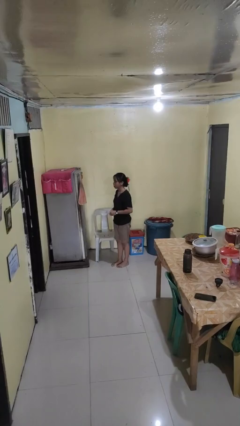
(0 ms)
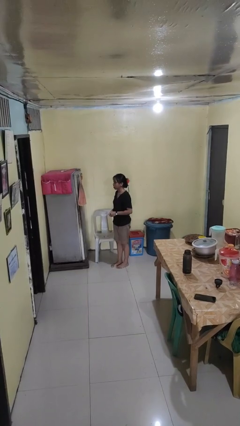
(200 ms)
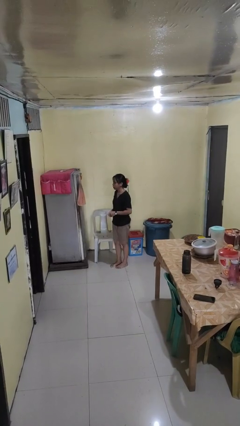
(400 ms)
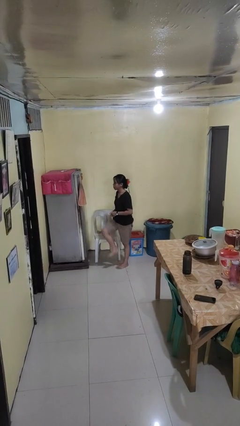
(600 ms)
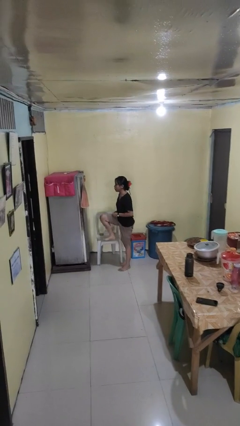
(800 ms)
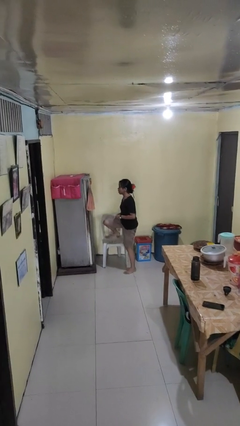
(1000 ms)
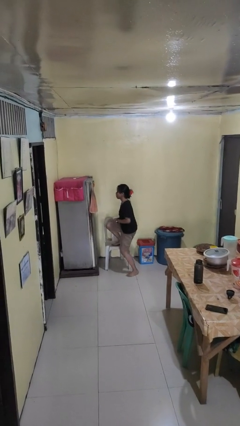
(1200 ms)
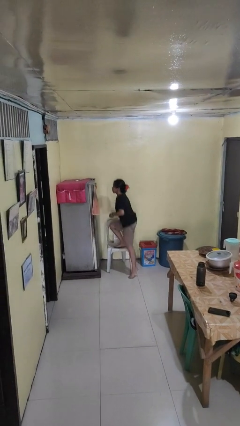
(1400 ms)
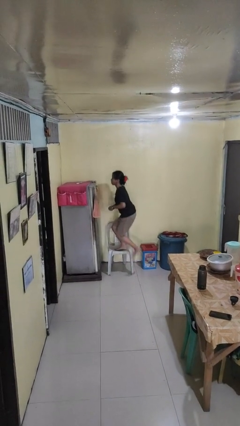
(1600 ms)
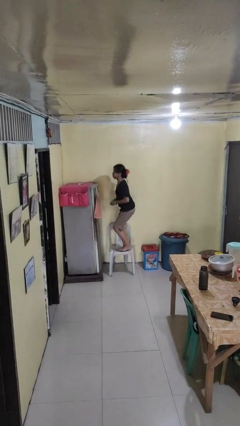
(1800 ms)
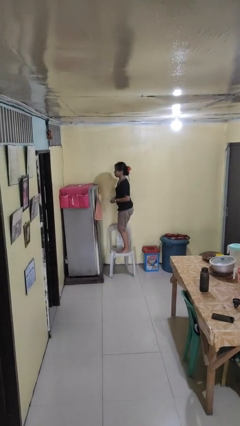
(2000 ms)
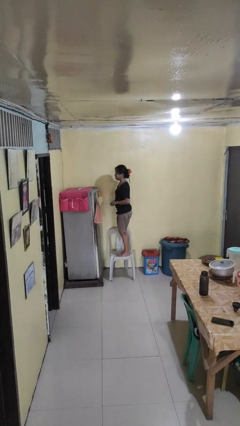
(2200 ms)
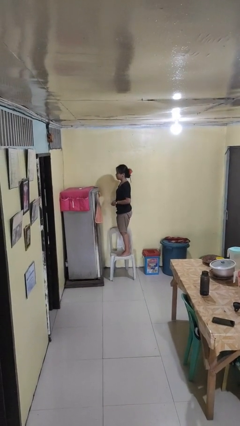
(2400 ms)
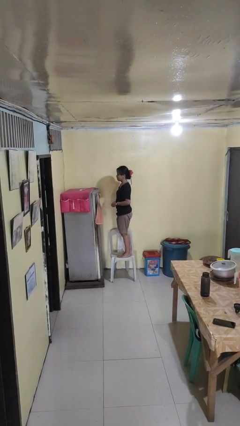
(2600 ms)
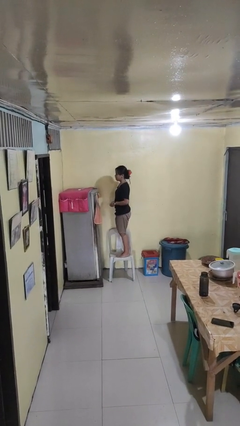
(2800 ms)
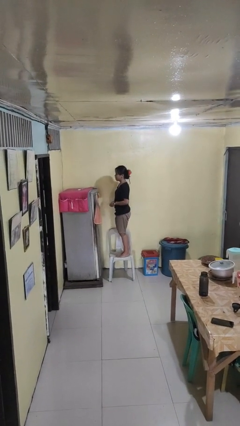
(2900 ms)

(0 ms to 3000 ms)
person climbs on chair

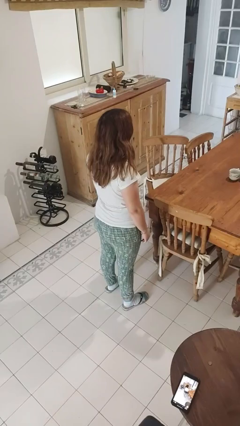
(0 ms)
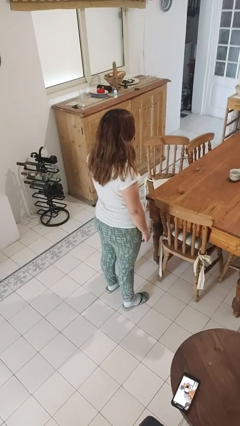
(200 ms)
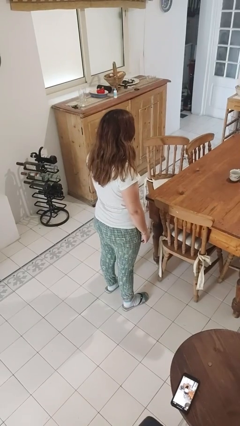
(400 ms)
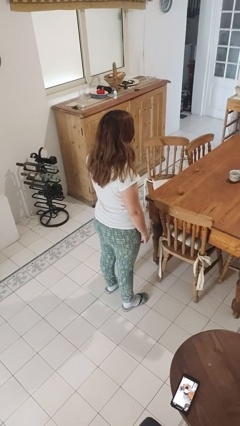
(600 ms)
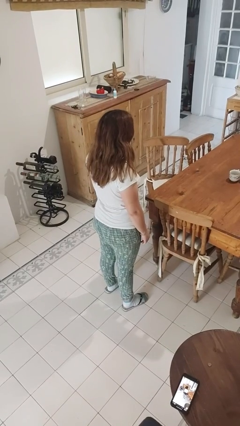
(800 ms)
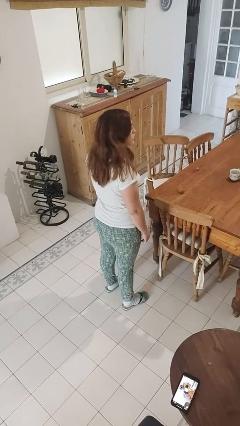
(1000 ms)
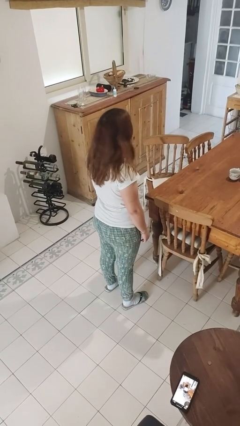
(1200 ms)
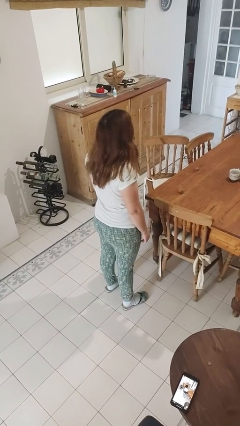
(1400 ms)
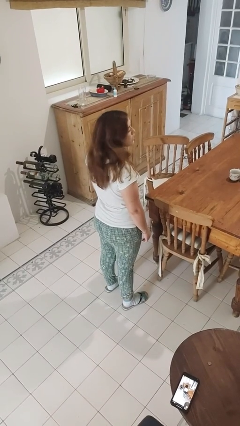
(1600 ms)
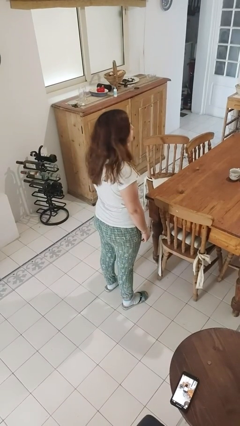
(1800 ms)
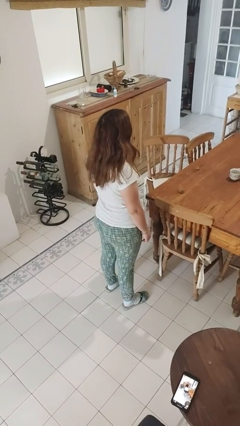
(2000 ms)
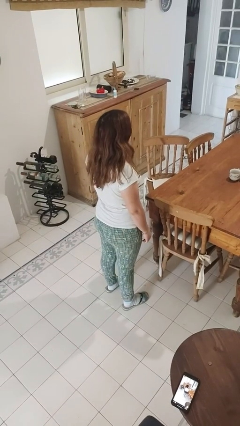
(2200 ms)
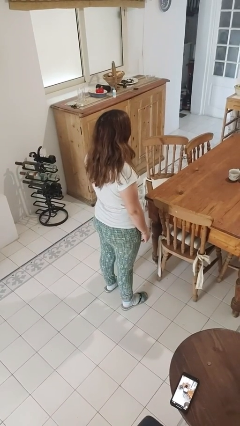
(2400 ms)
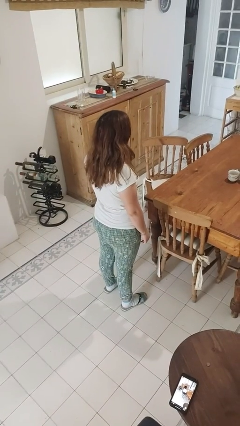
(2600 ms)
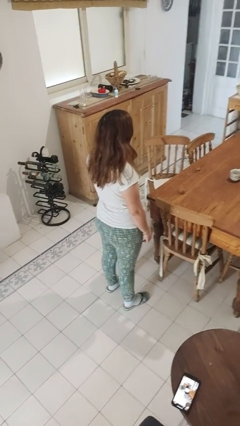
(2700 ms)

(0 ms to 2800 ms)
person shakes head

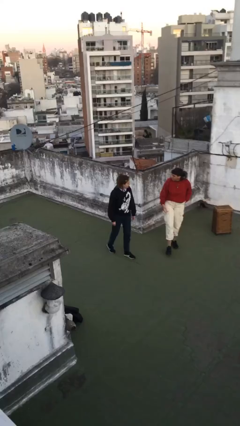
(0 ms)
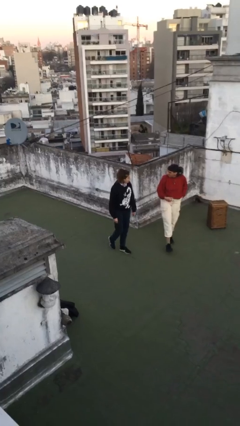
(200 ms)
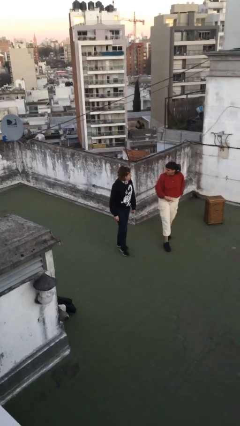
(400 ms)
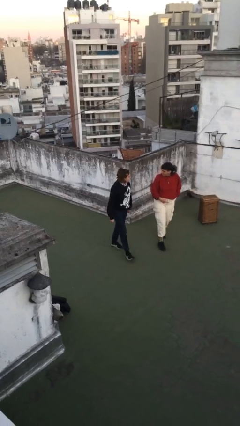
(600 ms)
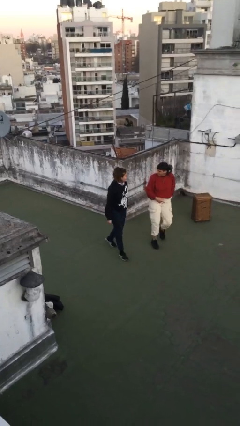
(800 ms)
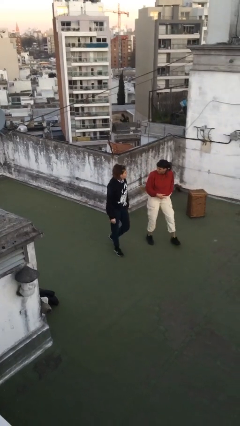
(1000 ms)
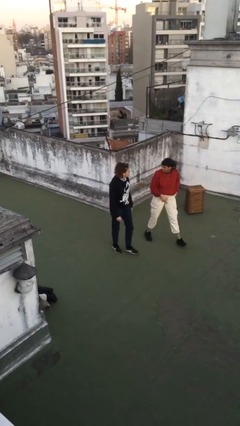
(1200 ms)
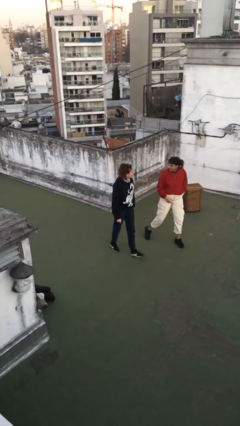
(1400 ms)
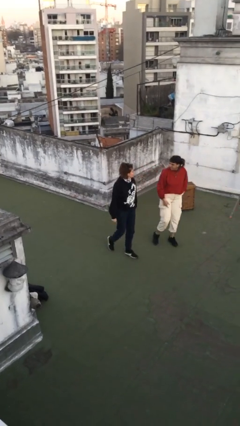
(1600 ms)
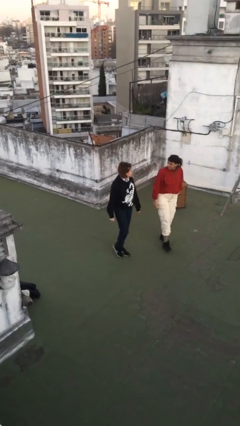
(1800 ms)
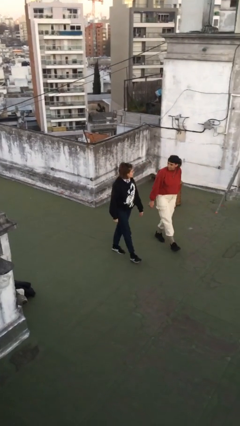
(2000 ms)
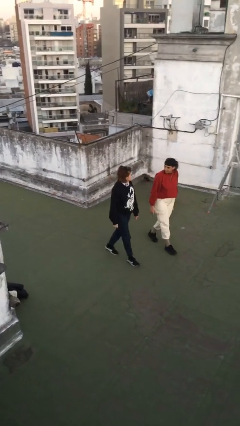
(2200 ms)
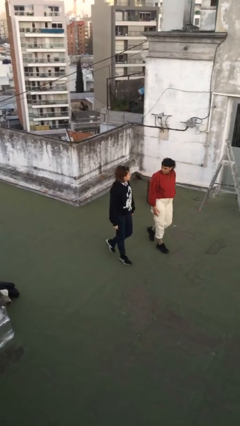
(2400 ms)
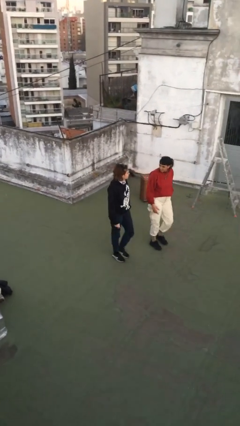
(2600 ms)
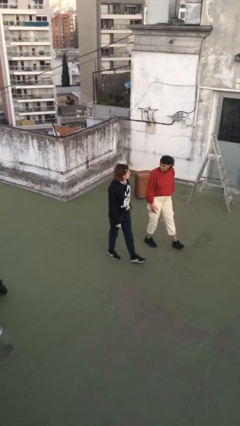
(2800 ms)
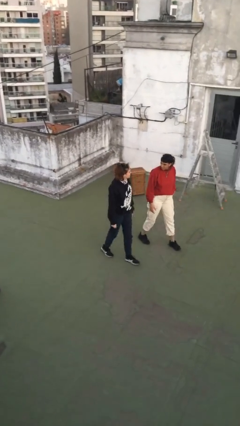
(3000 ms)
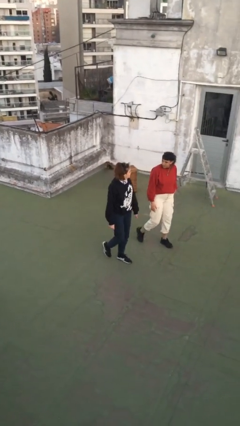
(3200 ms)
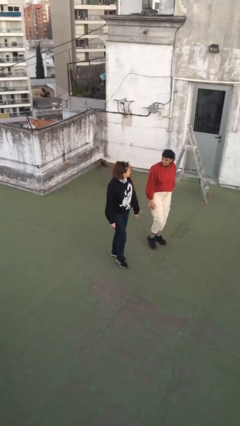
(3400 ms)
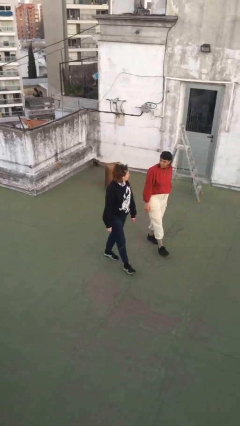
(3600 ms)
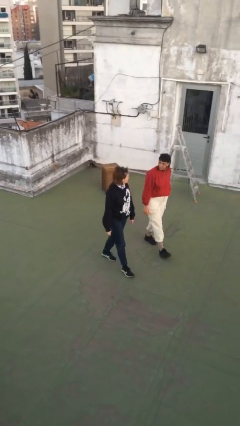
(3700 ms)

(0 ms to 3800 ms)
person talks to person

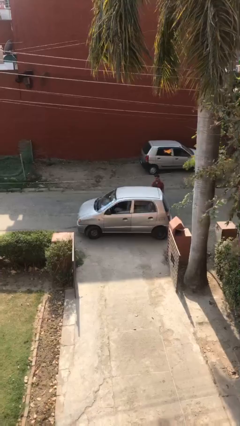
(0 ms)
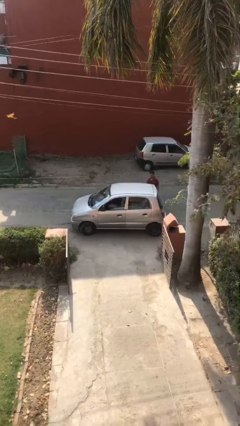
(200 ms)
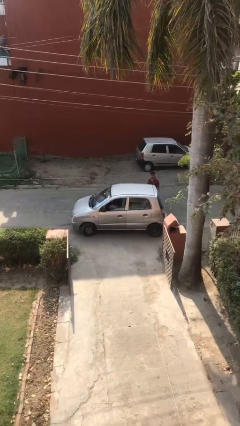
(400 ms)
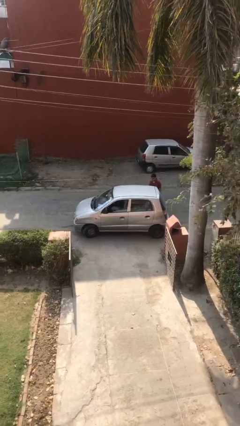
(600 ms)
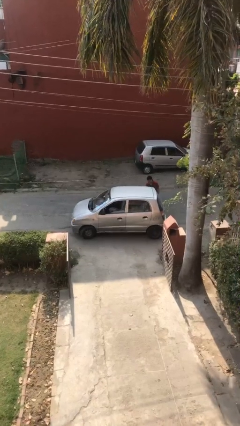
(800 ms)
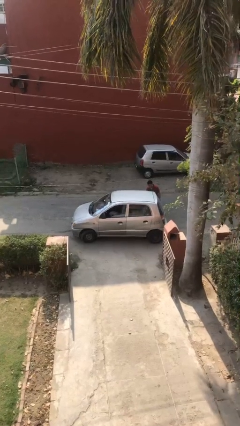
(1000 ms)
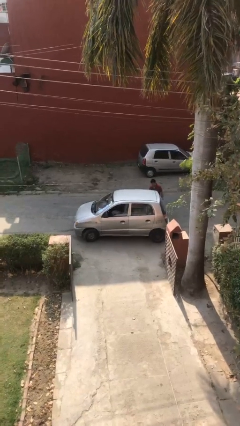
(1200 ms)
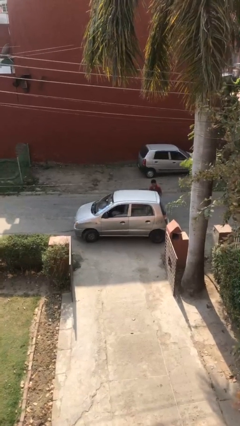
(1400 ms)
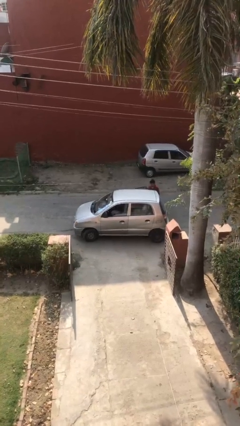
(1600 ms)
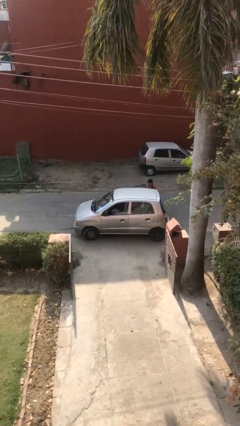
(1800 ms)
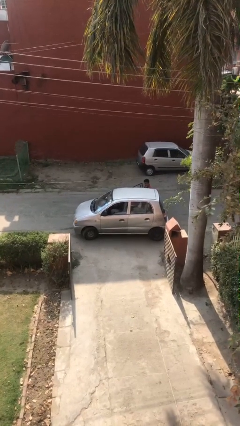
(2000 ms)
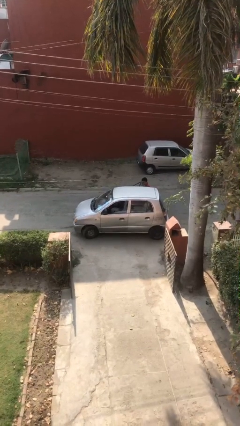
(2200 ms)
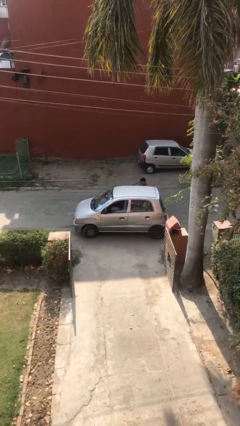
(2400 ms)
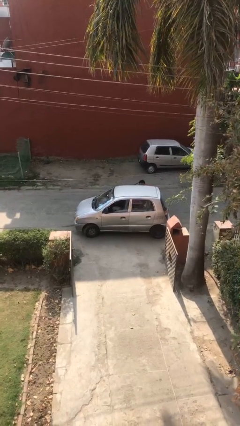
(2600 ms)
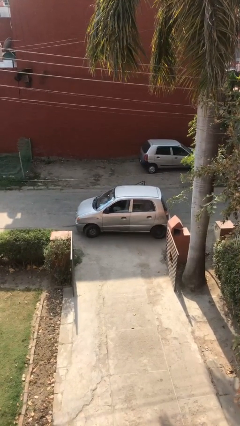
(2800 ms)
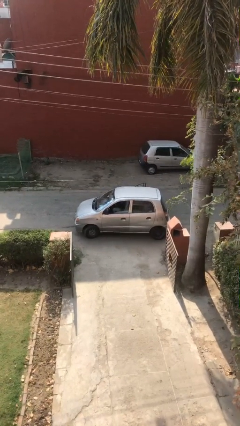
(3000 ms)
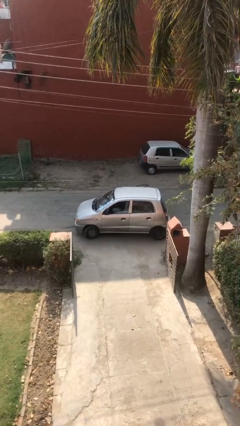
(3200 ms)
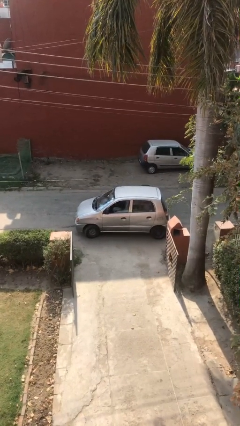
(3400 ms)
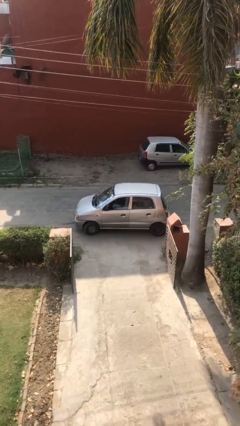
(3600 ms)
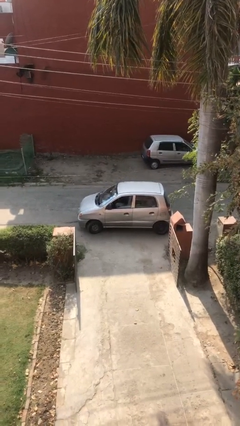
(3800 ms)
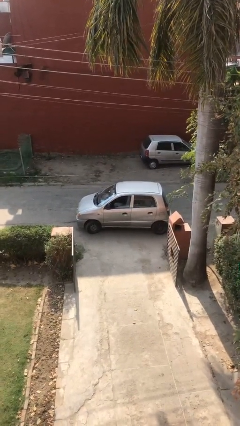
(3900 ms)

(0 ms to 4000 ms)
car picks up person

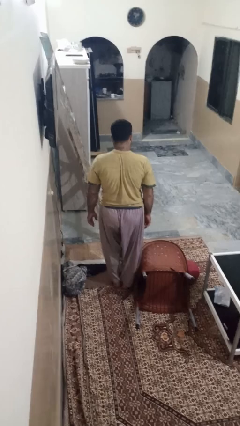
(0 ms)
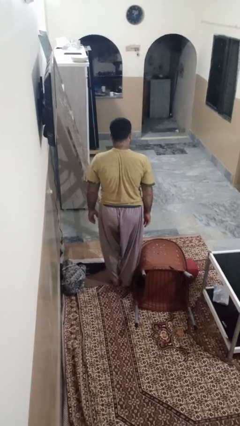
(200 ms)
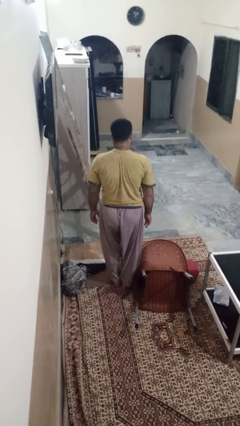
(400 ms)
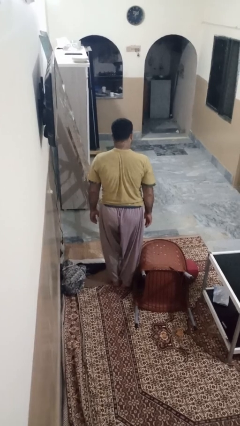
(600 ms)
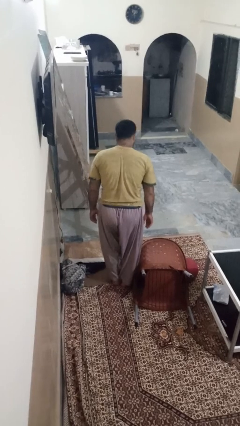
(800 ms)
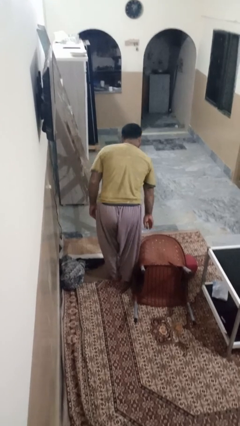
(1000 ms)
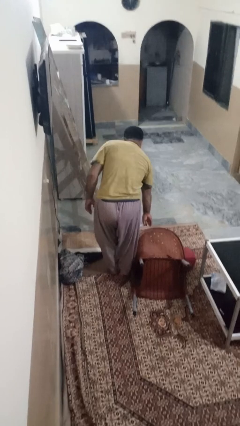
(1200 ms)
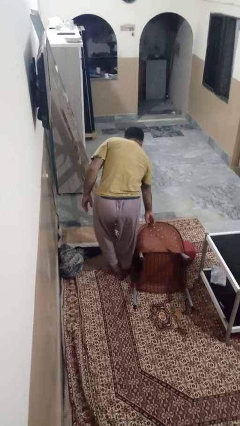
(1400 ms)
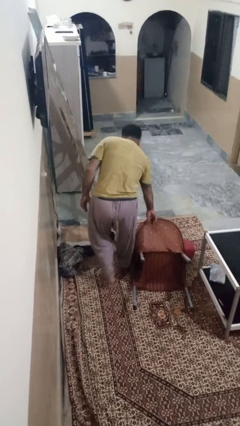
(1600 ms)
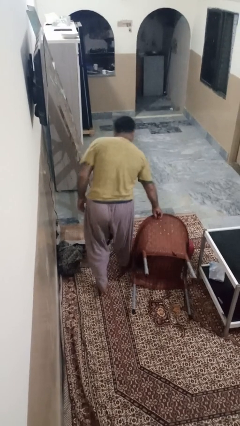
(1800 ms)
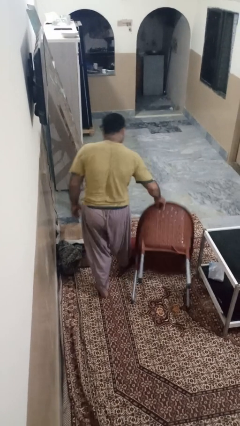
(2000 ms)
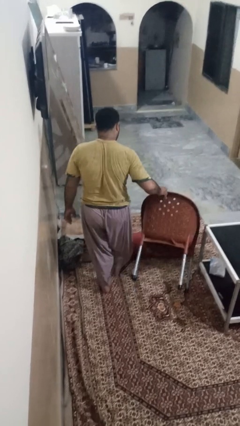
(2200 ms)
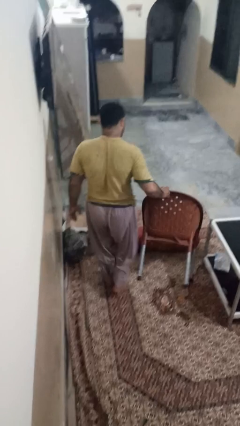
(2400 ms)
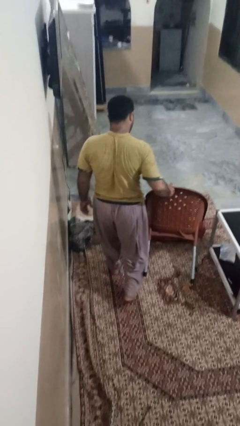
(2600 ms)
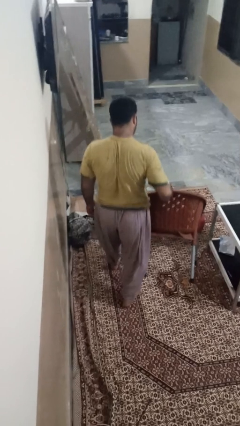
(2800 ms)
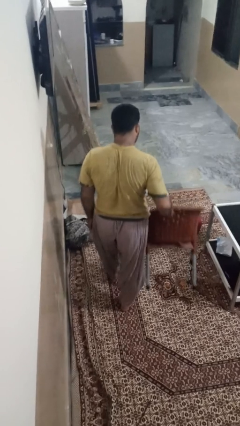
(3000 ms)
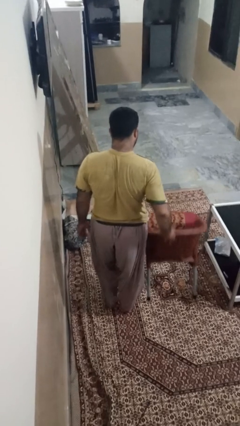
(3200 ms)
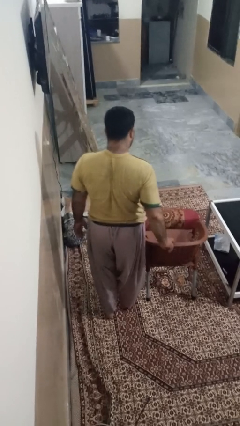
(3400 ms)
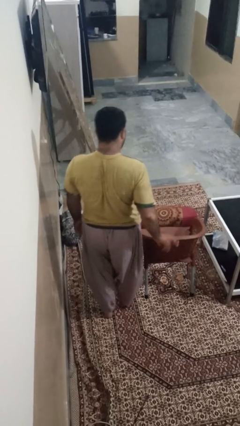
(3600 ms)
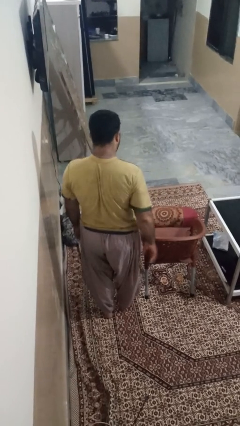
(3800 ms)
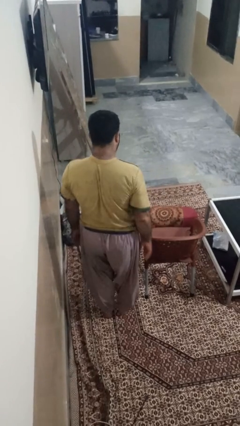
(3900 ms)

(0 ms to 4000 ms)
person sets upright furniture
